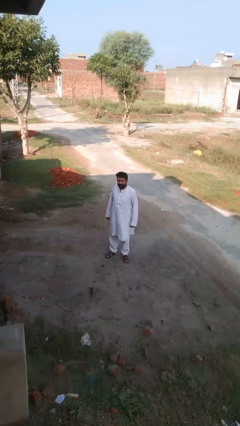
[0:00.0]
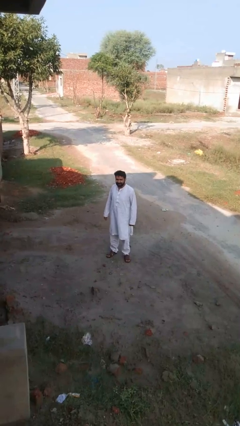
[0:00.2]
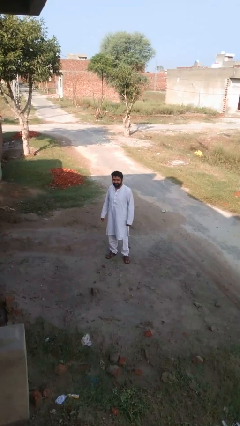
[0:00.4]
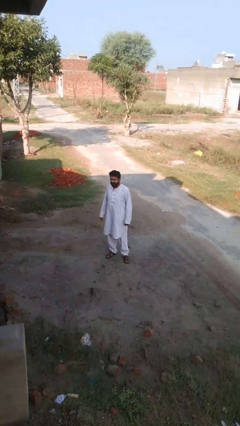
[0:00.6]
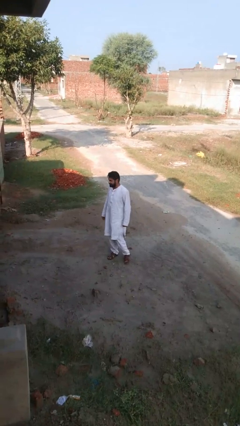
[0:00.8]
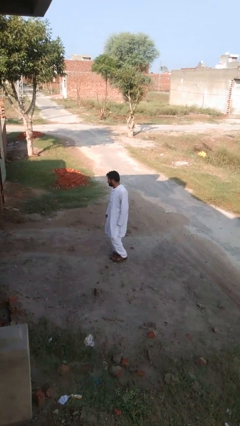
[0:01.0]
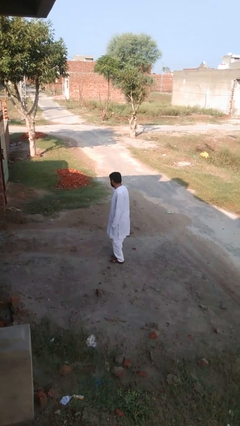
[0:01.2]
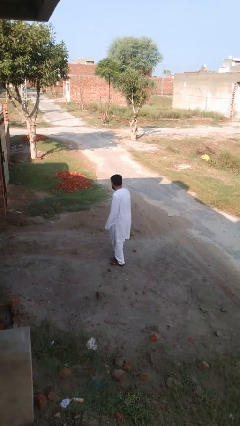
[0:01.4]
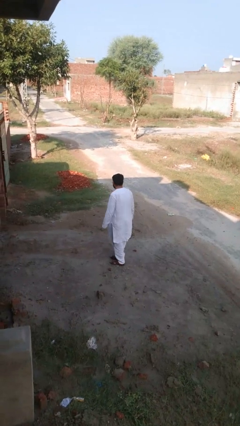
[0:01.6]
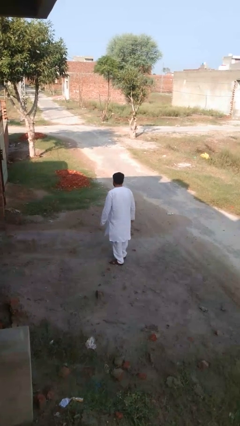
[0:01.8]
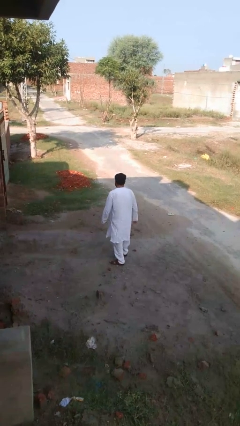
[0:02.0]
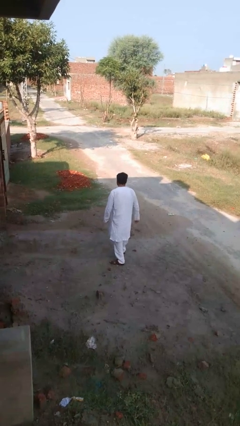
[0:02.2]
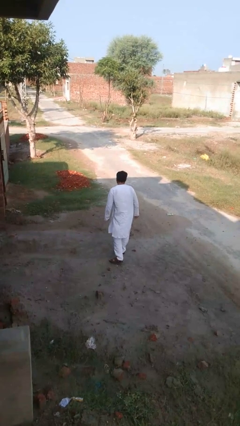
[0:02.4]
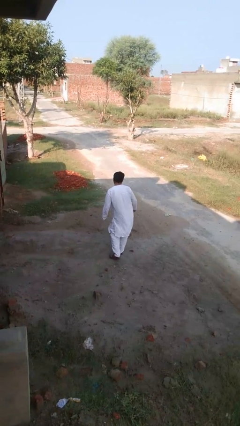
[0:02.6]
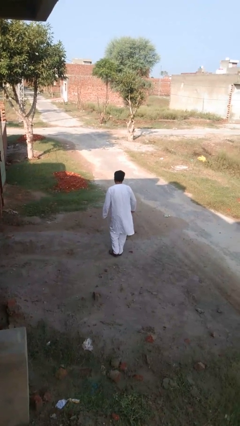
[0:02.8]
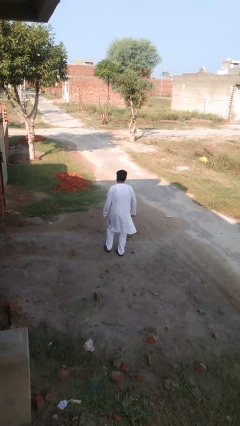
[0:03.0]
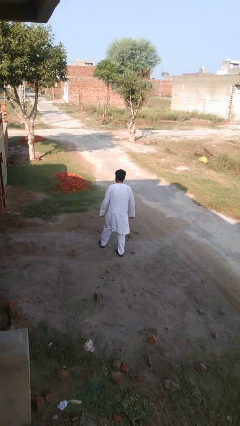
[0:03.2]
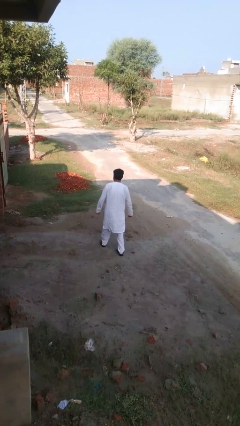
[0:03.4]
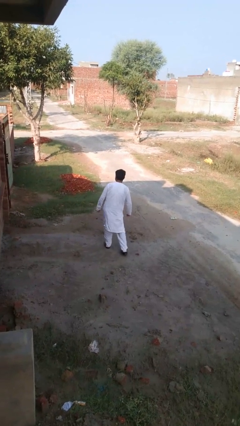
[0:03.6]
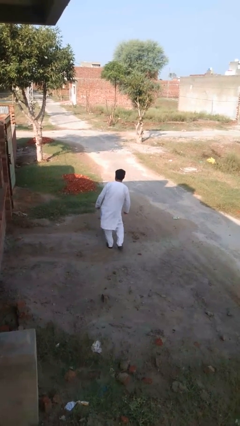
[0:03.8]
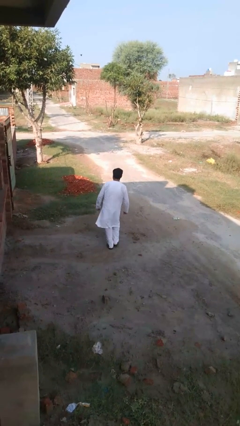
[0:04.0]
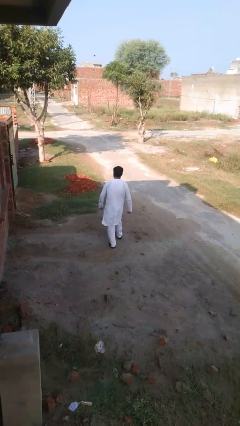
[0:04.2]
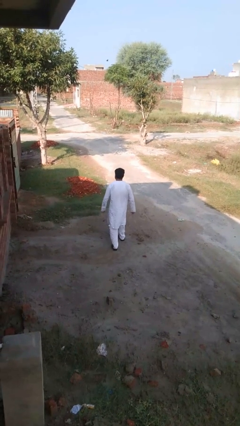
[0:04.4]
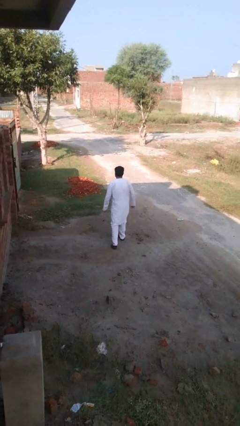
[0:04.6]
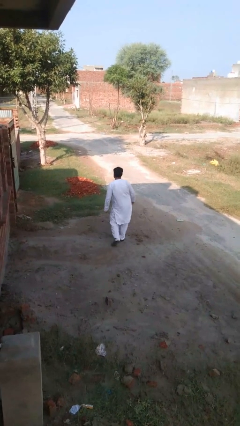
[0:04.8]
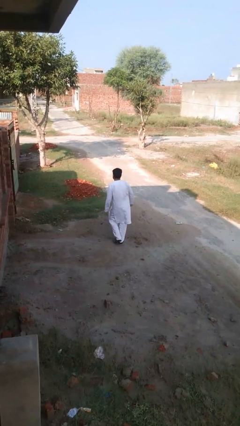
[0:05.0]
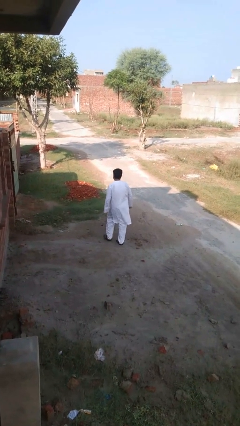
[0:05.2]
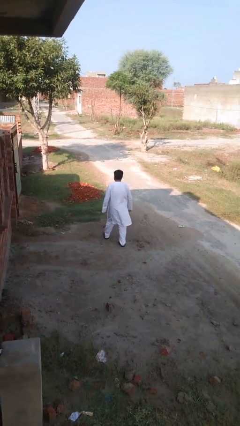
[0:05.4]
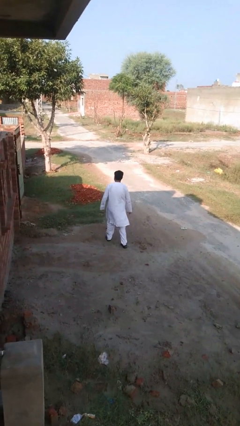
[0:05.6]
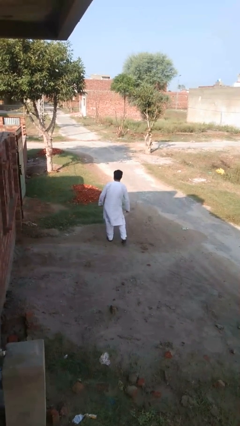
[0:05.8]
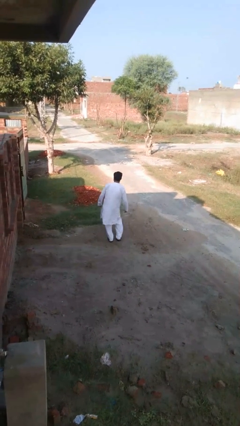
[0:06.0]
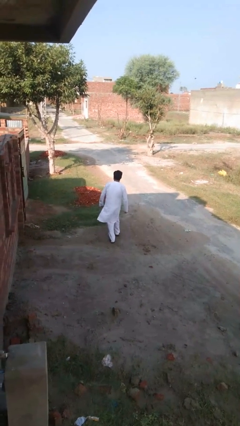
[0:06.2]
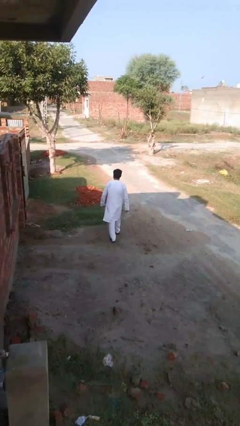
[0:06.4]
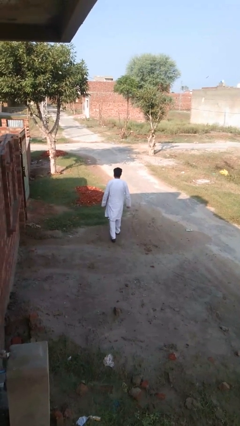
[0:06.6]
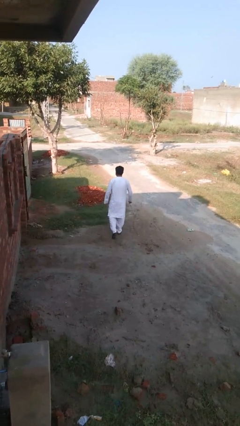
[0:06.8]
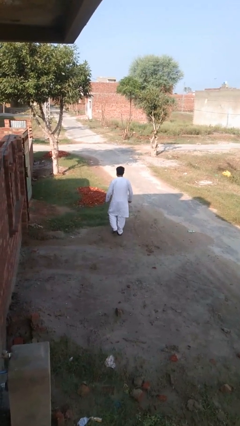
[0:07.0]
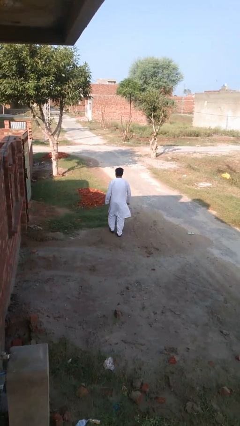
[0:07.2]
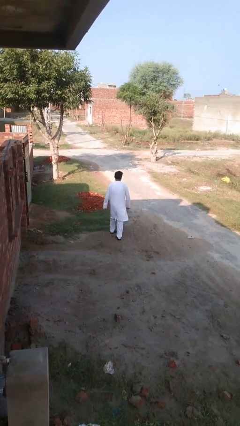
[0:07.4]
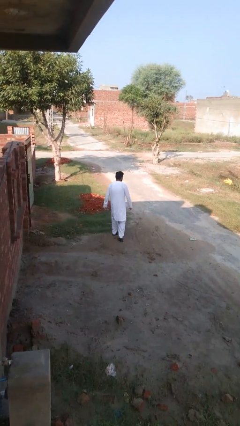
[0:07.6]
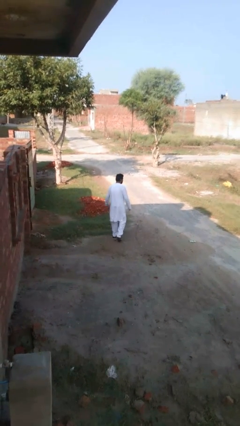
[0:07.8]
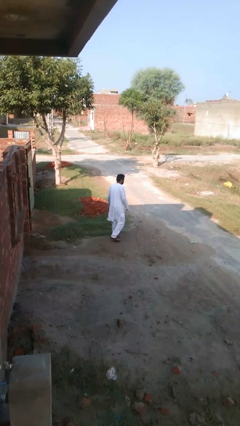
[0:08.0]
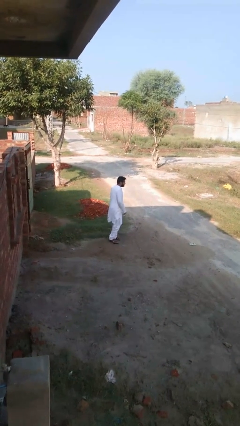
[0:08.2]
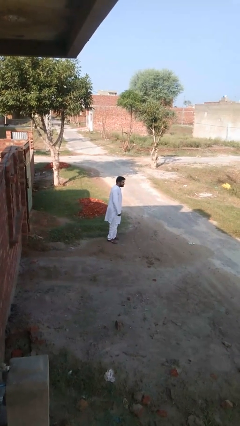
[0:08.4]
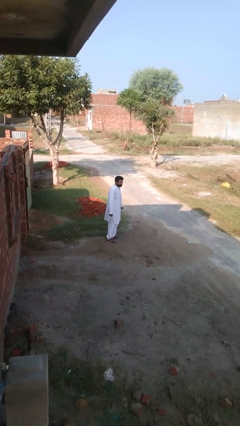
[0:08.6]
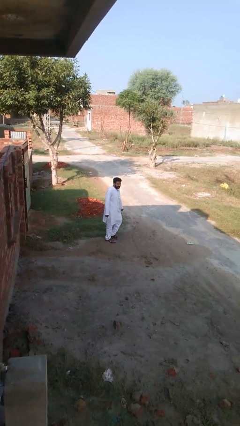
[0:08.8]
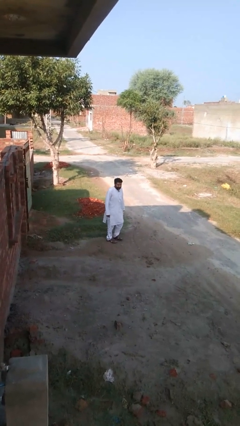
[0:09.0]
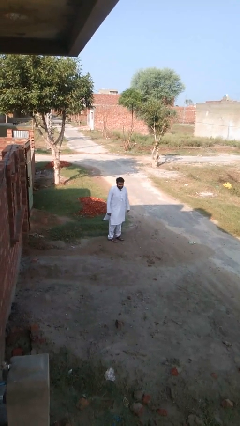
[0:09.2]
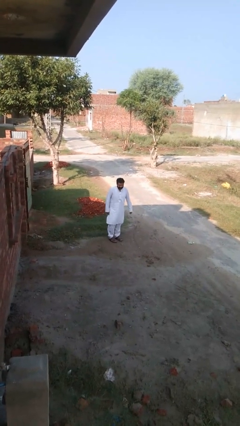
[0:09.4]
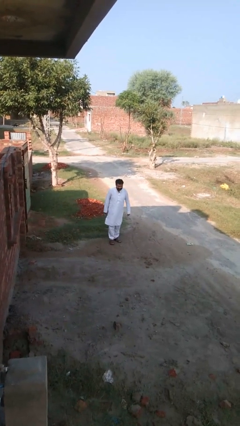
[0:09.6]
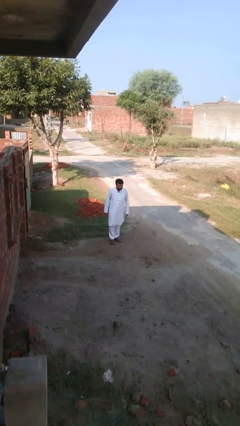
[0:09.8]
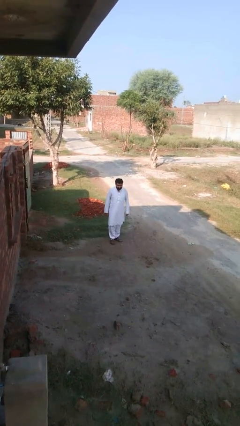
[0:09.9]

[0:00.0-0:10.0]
person walks tiptoe

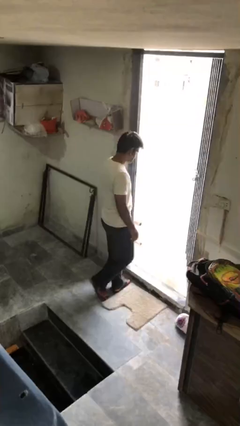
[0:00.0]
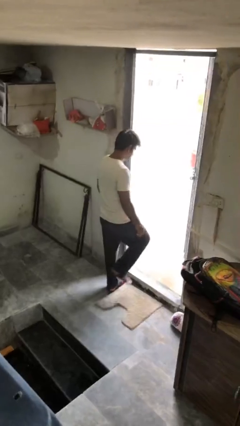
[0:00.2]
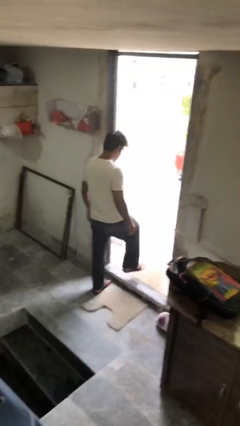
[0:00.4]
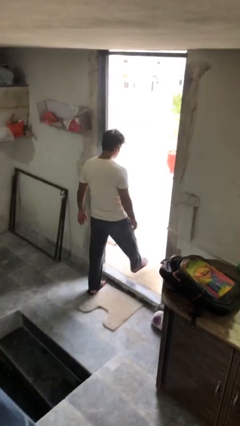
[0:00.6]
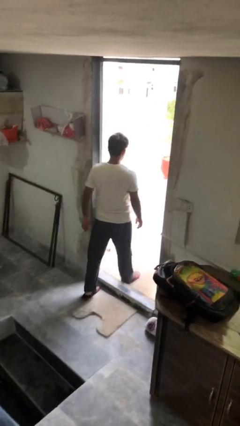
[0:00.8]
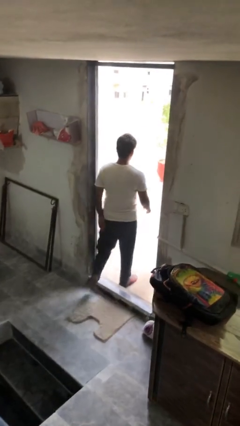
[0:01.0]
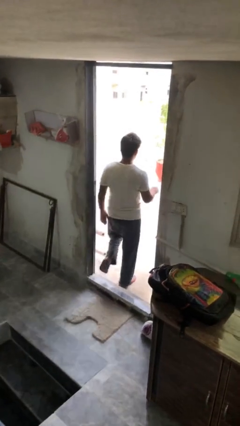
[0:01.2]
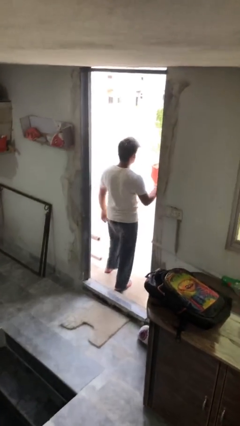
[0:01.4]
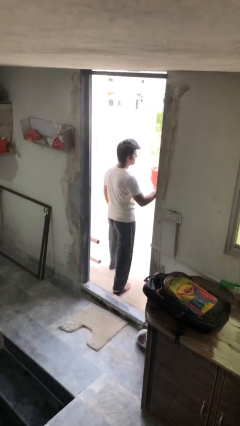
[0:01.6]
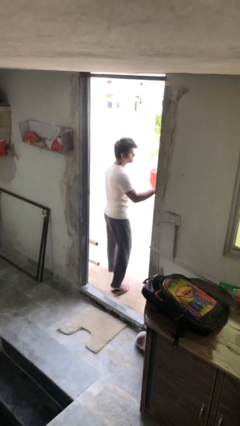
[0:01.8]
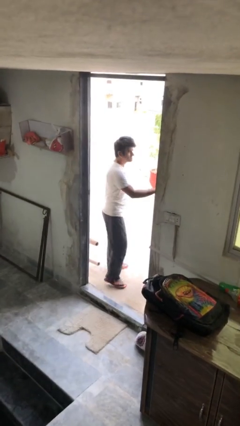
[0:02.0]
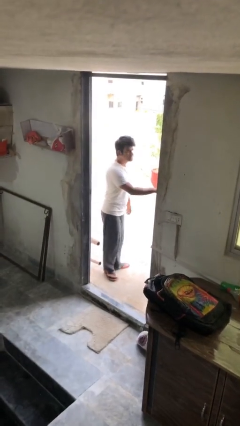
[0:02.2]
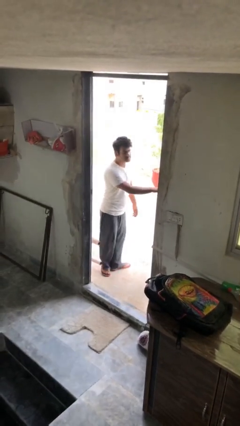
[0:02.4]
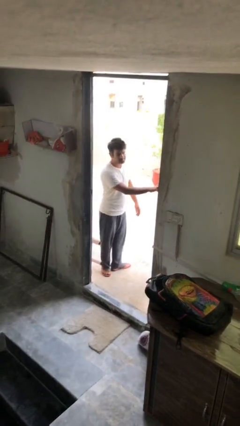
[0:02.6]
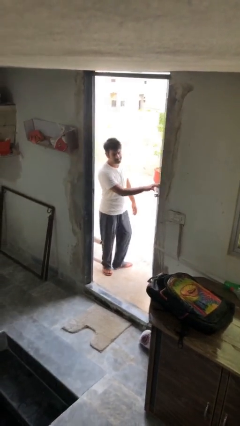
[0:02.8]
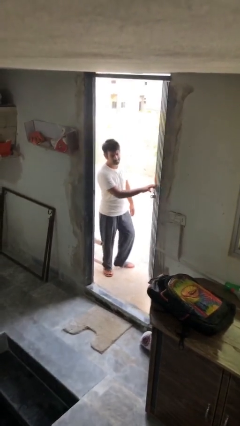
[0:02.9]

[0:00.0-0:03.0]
person exits scene through structure

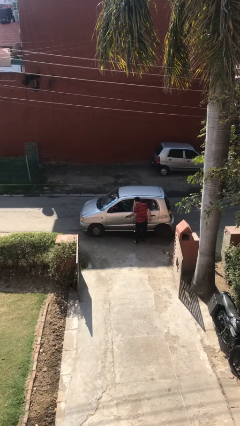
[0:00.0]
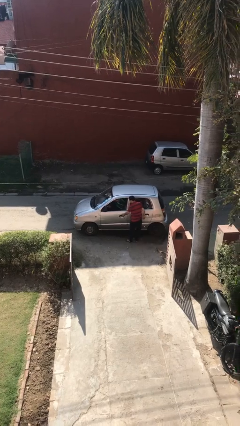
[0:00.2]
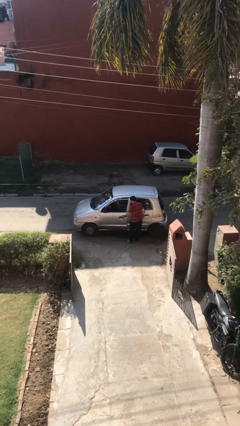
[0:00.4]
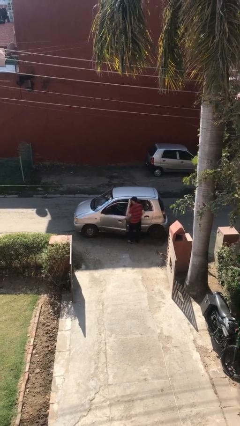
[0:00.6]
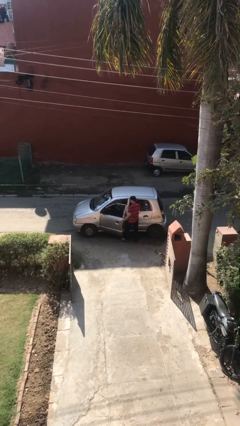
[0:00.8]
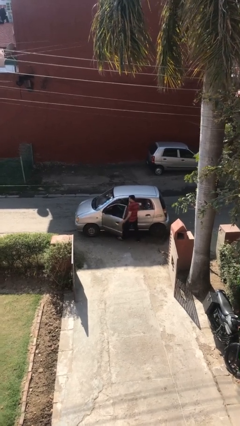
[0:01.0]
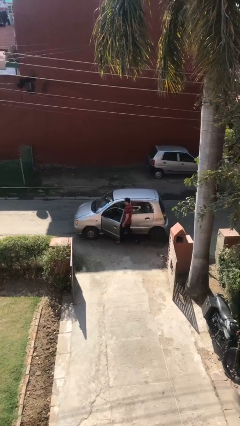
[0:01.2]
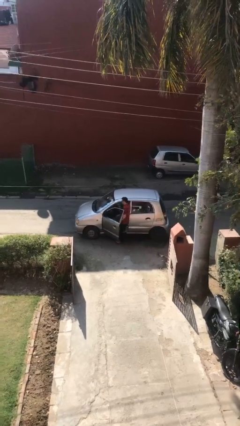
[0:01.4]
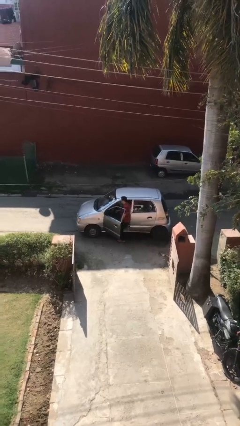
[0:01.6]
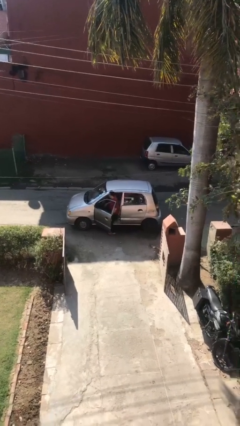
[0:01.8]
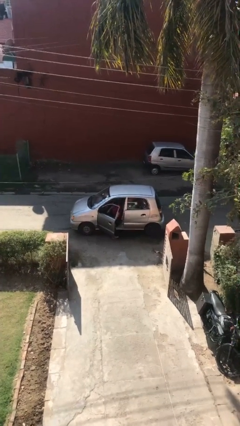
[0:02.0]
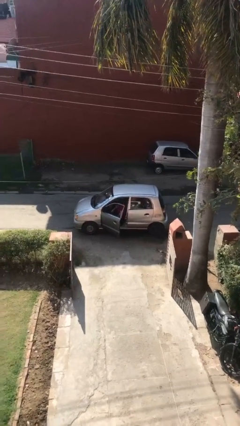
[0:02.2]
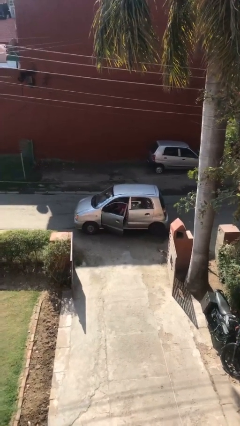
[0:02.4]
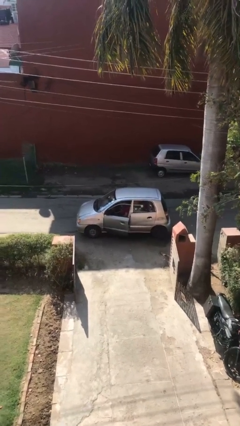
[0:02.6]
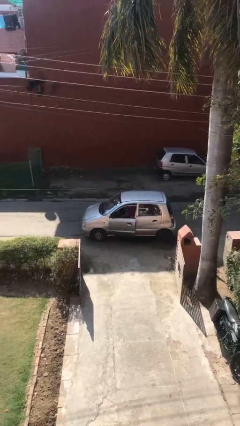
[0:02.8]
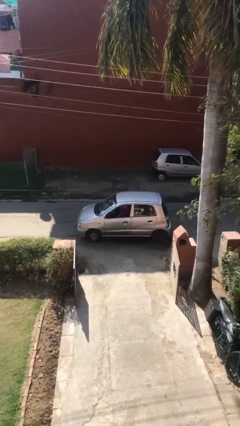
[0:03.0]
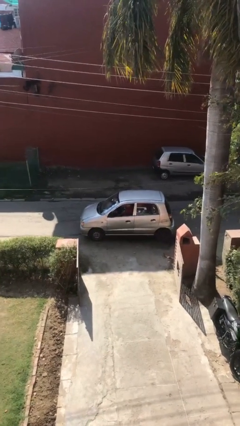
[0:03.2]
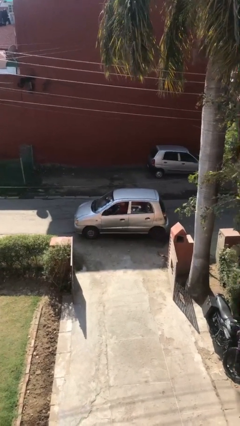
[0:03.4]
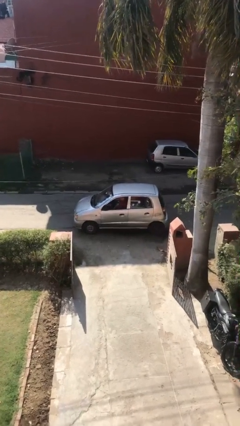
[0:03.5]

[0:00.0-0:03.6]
car picks up person

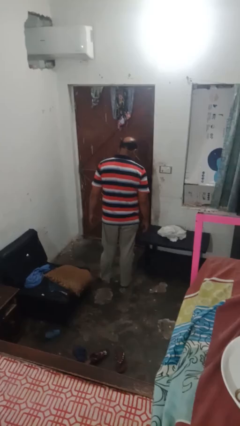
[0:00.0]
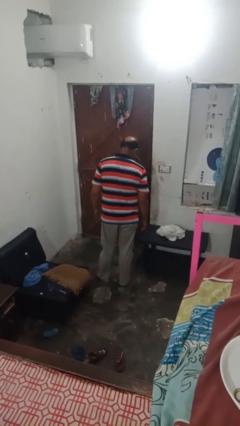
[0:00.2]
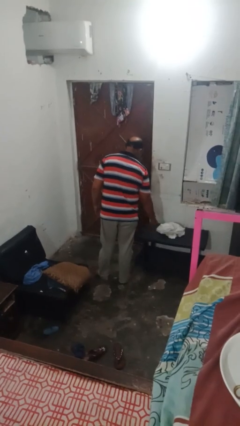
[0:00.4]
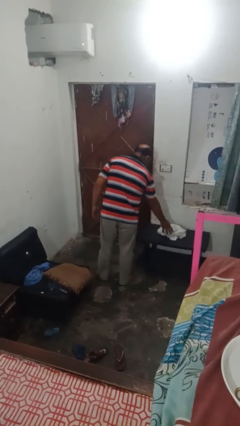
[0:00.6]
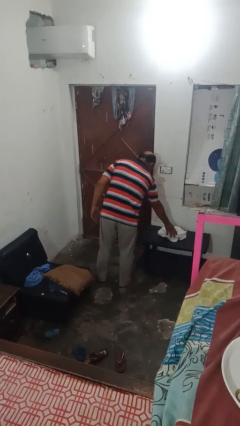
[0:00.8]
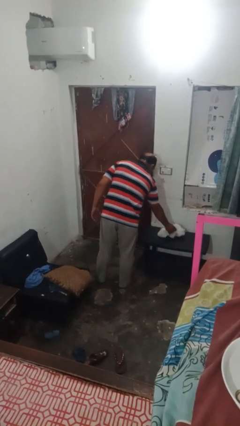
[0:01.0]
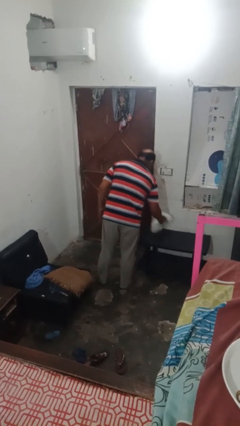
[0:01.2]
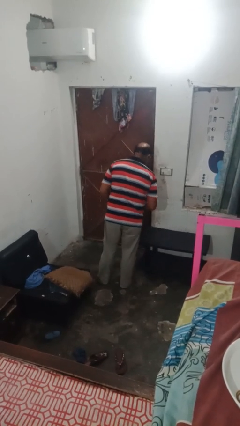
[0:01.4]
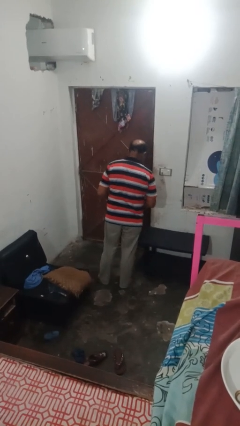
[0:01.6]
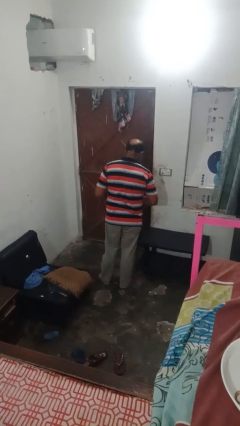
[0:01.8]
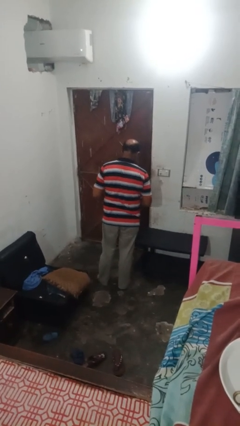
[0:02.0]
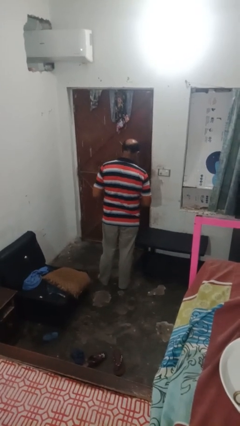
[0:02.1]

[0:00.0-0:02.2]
person picks up object from table
